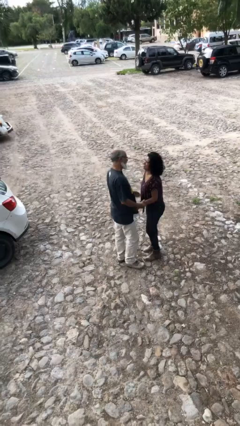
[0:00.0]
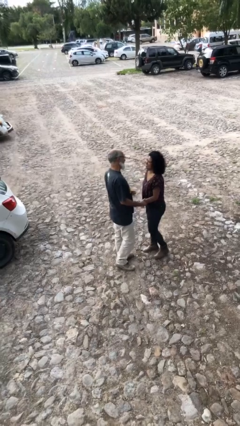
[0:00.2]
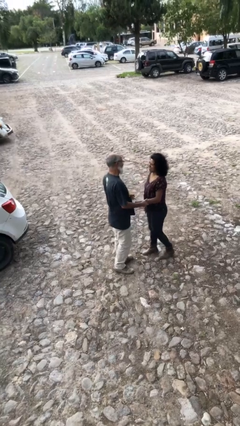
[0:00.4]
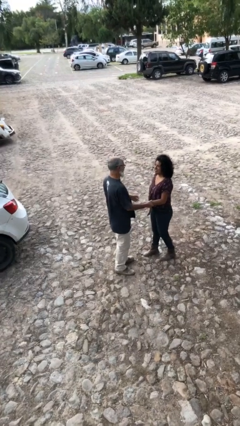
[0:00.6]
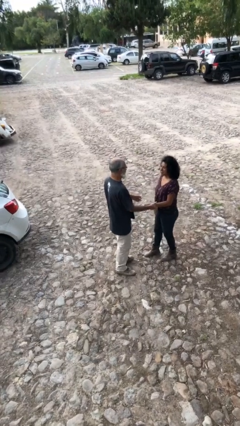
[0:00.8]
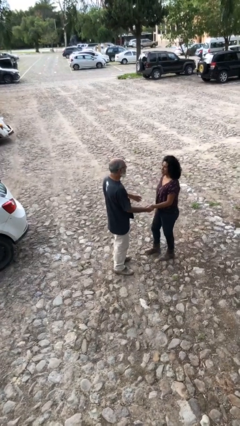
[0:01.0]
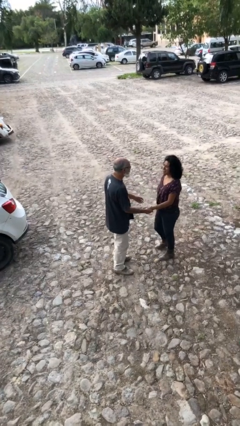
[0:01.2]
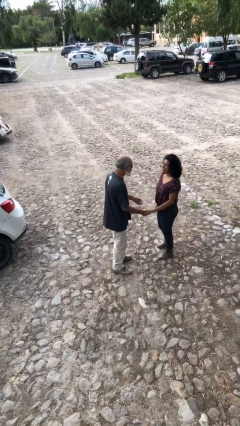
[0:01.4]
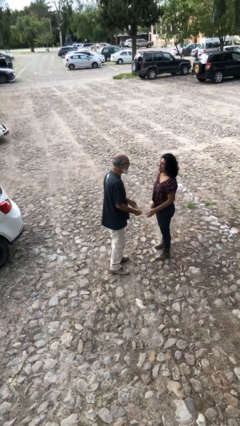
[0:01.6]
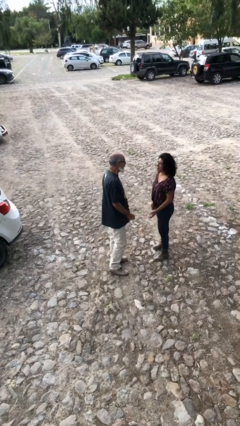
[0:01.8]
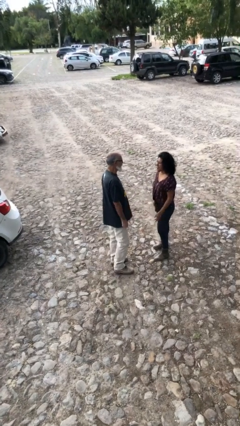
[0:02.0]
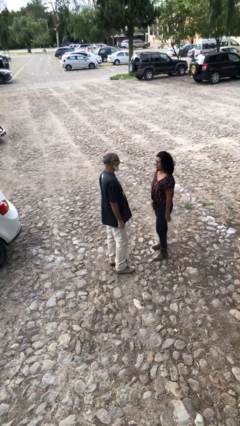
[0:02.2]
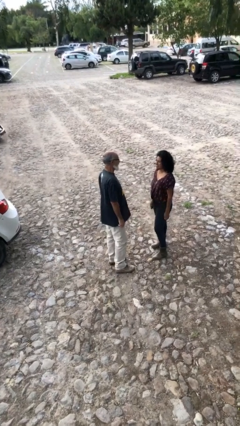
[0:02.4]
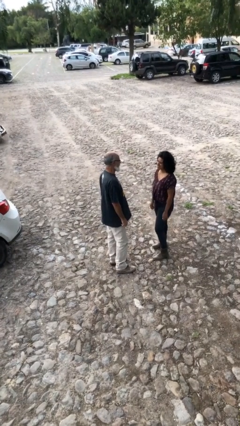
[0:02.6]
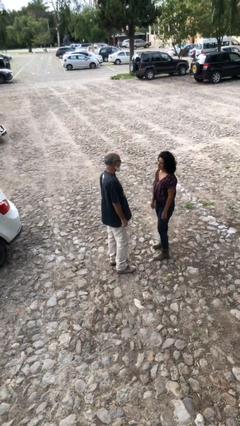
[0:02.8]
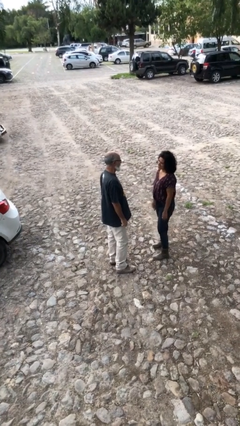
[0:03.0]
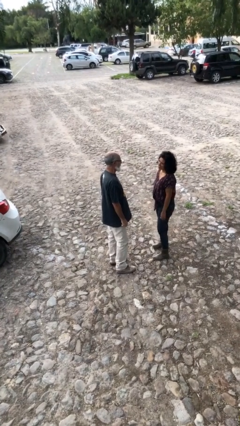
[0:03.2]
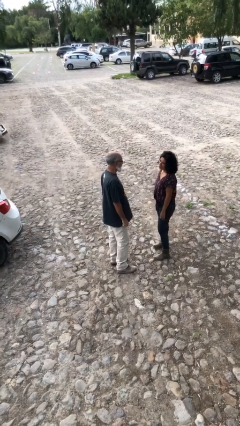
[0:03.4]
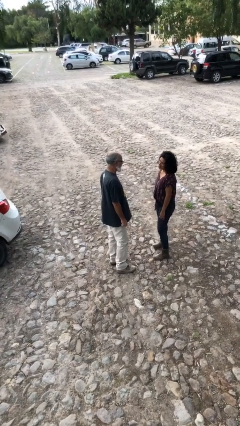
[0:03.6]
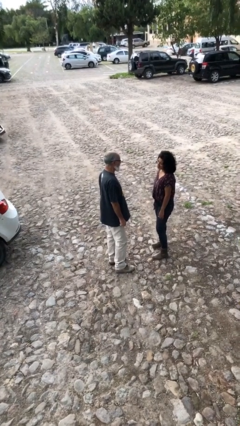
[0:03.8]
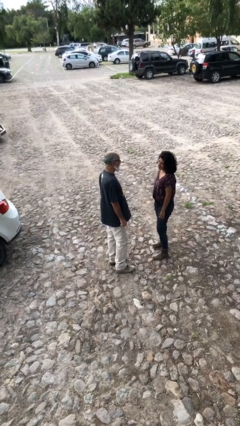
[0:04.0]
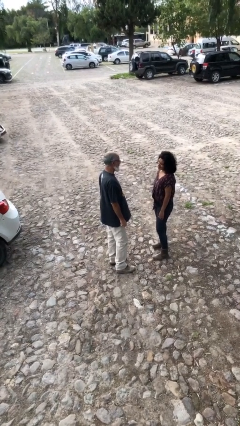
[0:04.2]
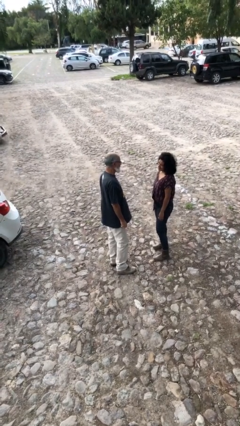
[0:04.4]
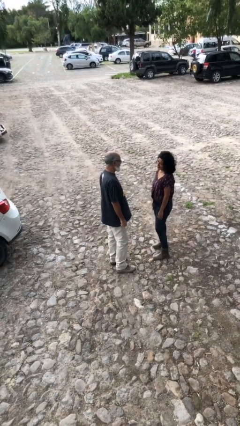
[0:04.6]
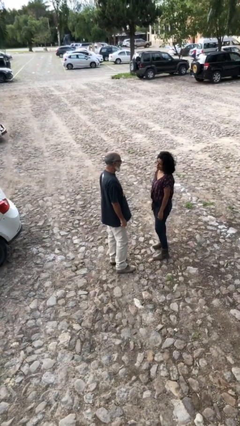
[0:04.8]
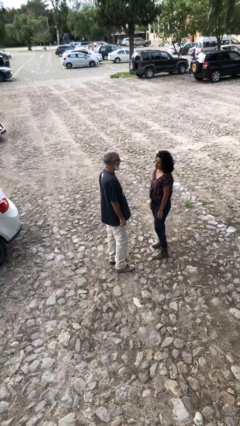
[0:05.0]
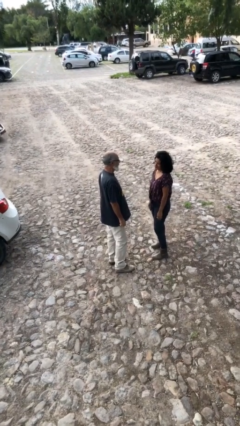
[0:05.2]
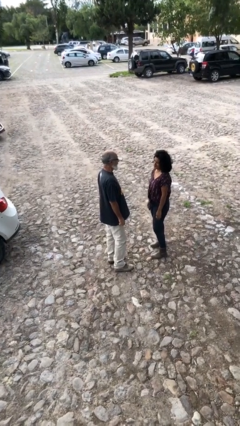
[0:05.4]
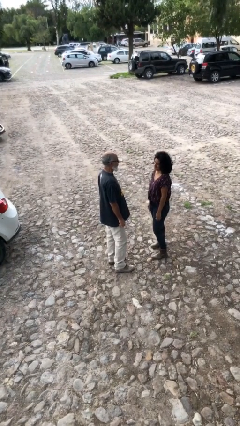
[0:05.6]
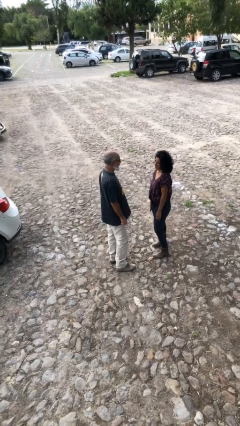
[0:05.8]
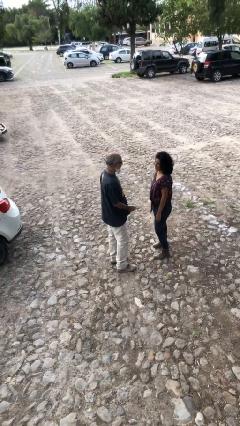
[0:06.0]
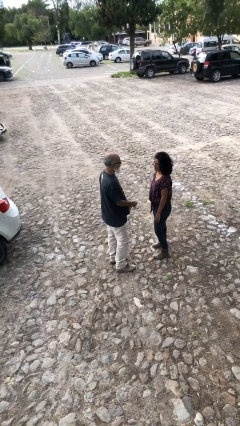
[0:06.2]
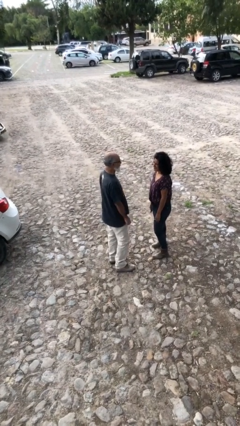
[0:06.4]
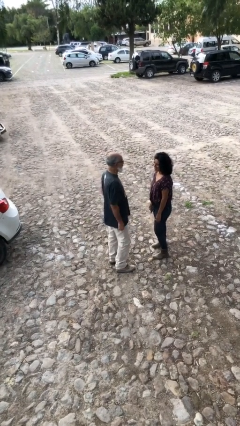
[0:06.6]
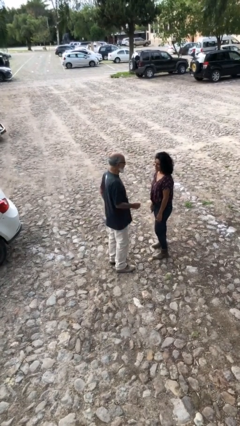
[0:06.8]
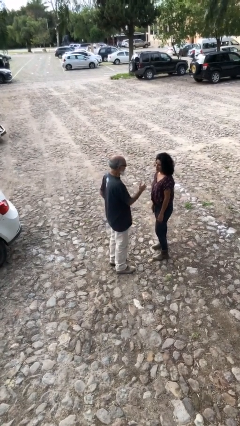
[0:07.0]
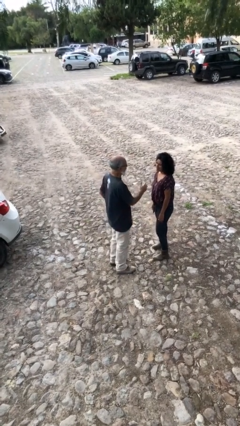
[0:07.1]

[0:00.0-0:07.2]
person talks to person

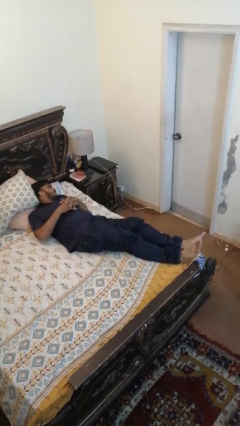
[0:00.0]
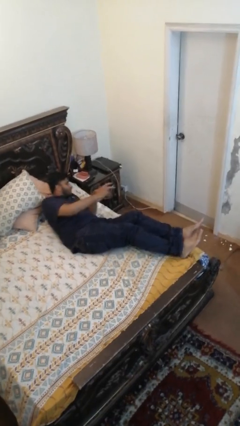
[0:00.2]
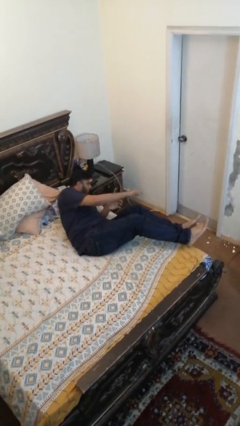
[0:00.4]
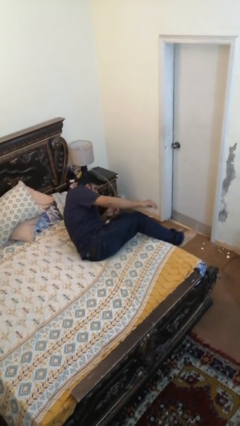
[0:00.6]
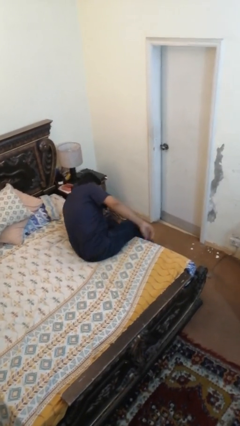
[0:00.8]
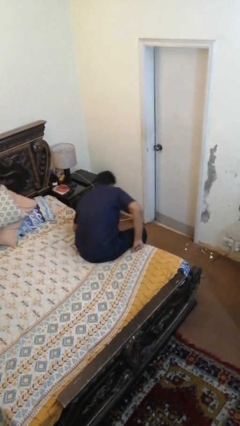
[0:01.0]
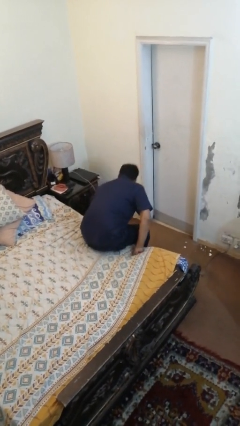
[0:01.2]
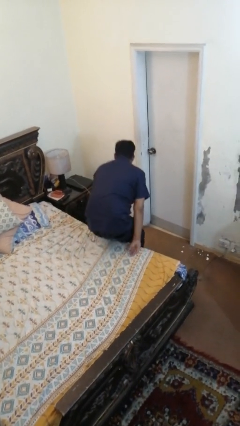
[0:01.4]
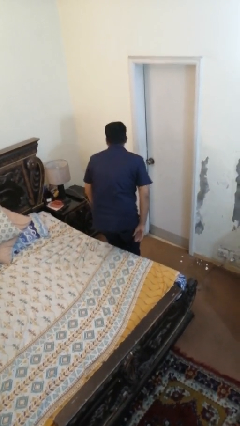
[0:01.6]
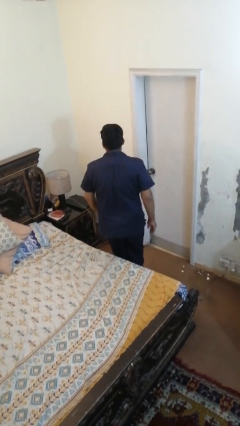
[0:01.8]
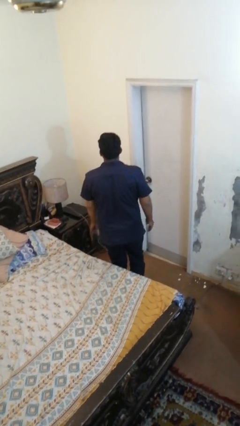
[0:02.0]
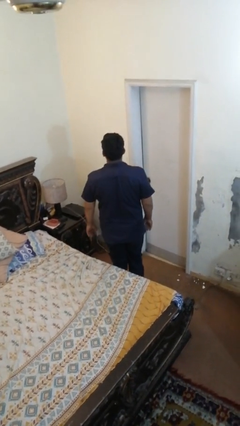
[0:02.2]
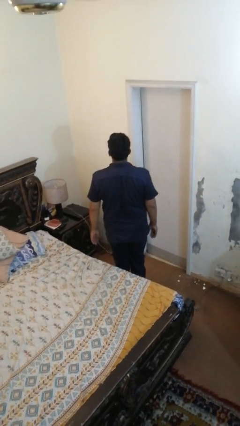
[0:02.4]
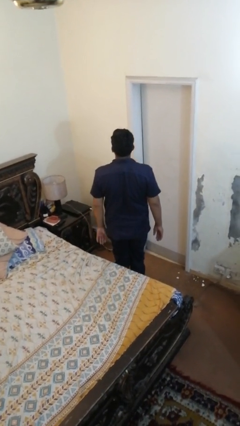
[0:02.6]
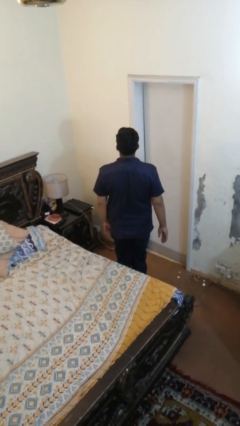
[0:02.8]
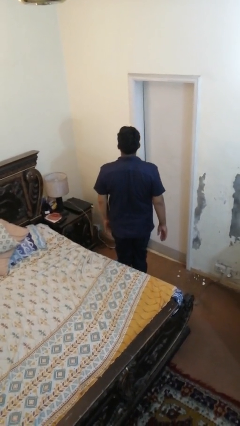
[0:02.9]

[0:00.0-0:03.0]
person stands up

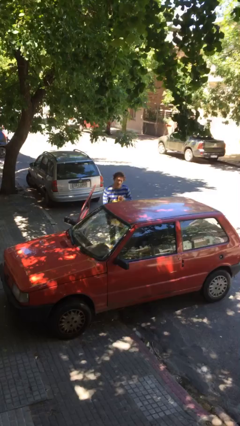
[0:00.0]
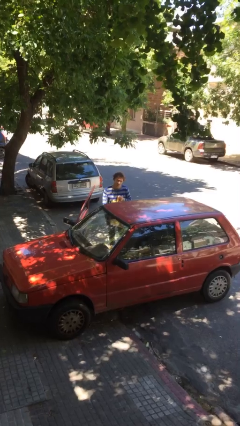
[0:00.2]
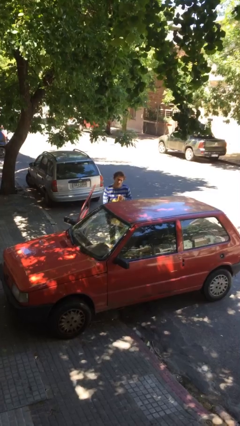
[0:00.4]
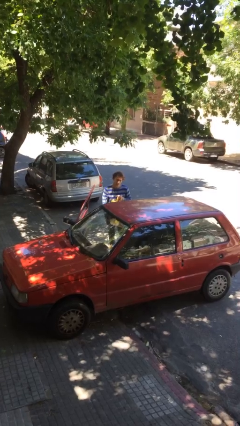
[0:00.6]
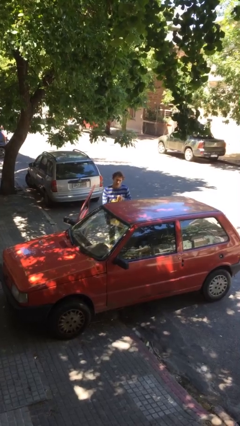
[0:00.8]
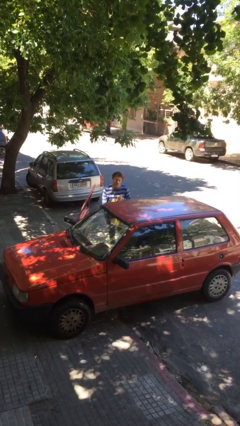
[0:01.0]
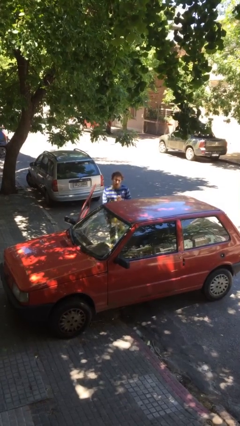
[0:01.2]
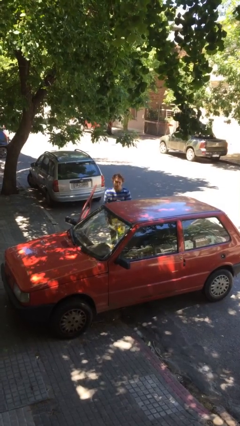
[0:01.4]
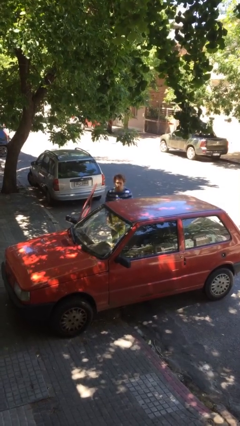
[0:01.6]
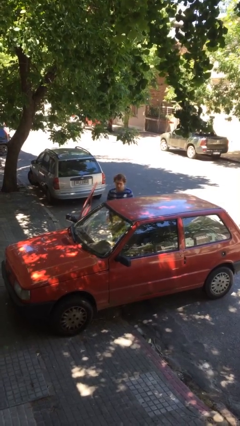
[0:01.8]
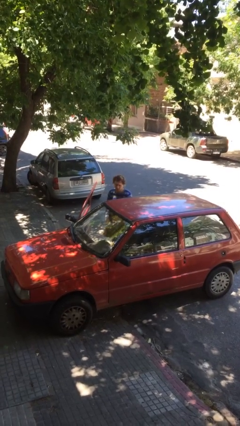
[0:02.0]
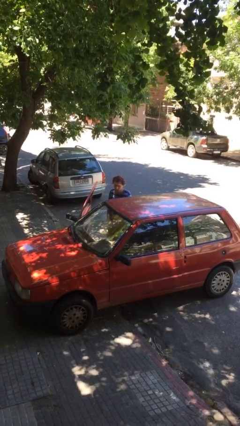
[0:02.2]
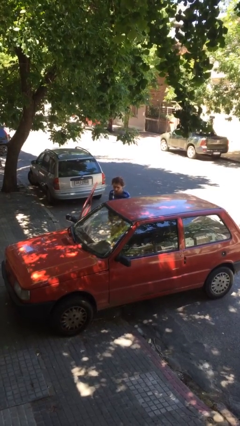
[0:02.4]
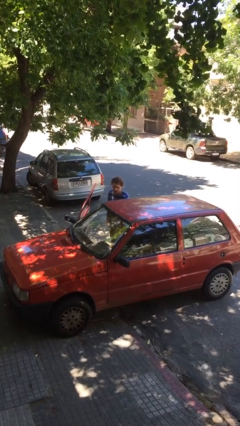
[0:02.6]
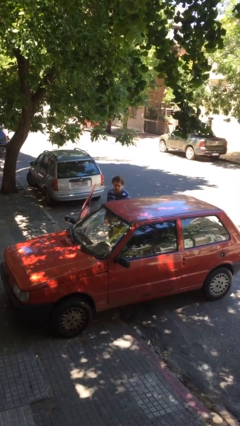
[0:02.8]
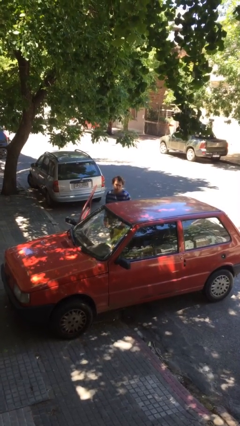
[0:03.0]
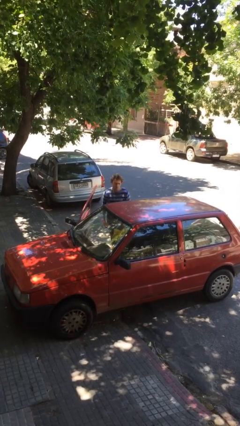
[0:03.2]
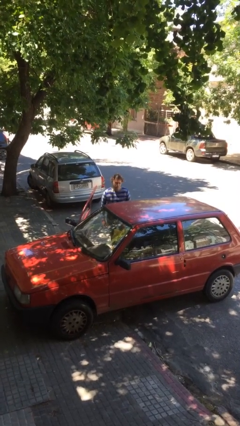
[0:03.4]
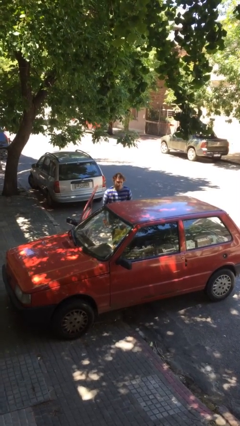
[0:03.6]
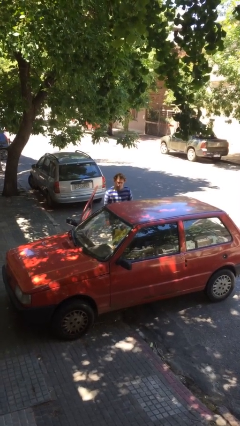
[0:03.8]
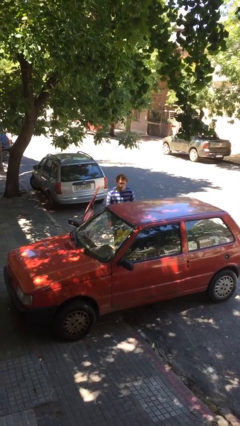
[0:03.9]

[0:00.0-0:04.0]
person loads car

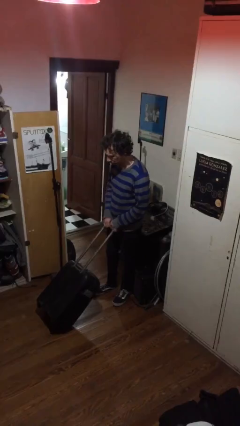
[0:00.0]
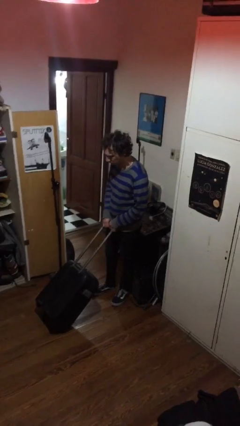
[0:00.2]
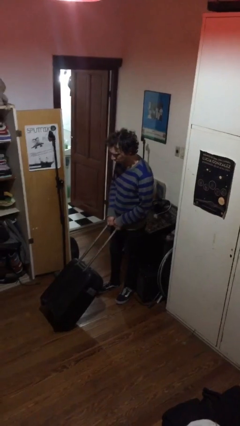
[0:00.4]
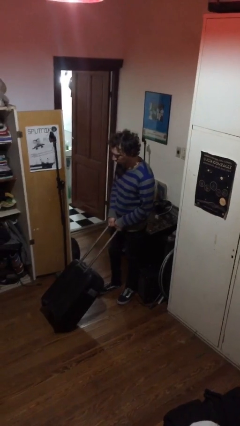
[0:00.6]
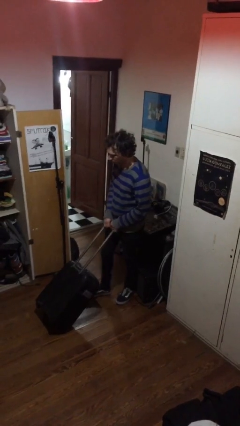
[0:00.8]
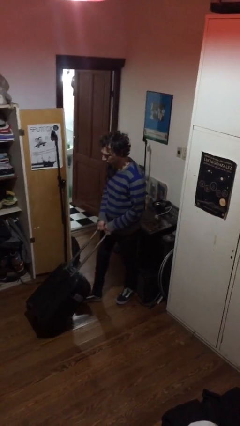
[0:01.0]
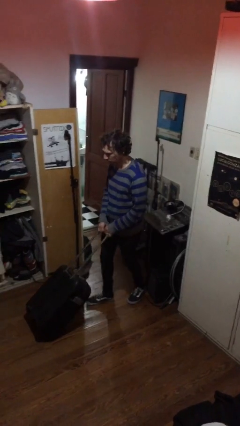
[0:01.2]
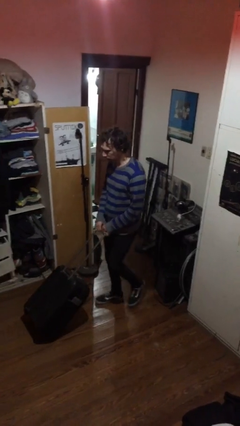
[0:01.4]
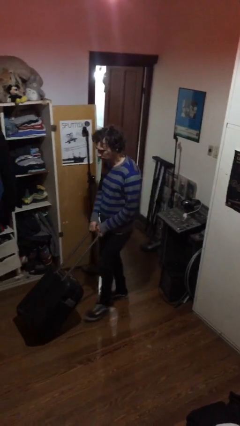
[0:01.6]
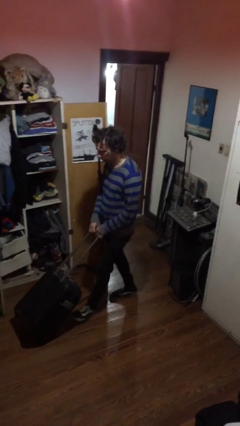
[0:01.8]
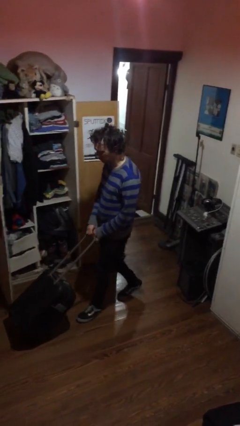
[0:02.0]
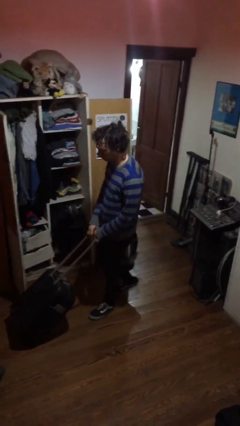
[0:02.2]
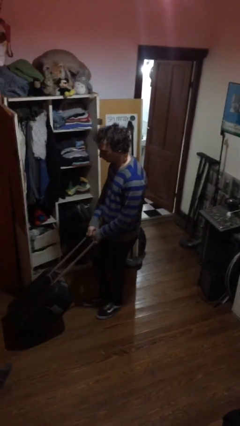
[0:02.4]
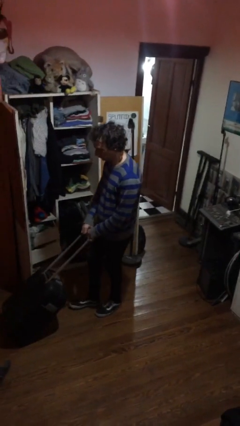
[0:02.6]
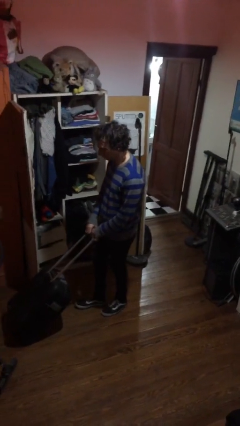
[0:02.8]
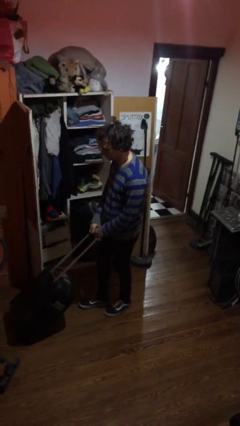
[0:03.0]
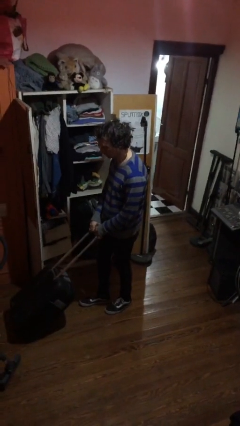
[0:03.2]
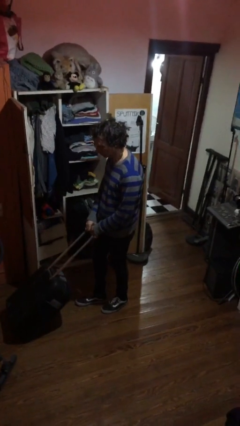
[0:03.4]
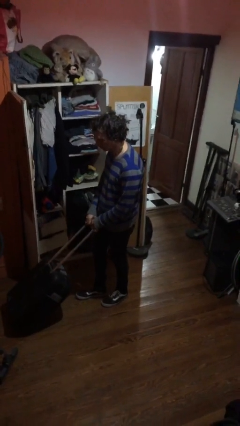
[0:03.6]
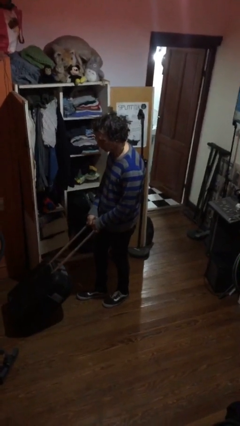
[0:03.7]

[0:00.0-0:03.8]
person pushes wheeled cart
